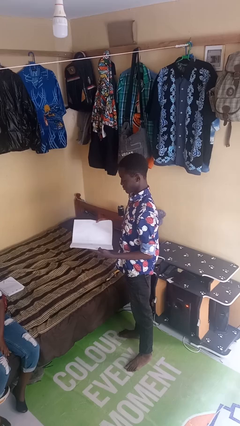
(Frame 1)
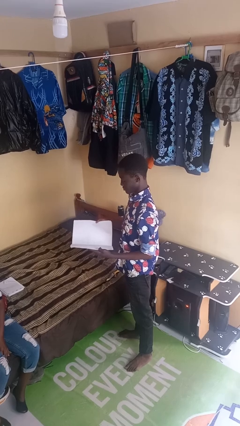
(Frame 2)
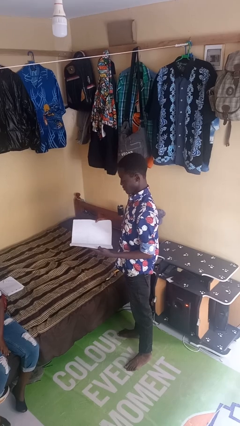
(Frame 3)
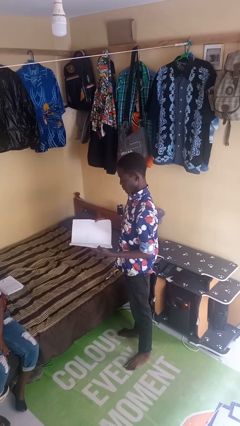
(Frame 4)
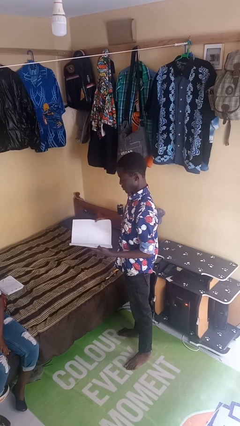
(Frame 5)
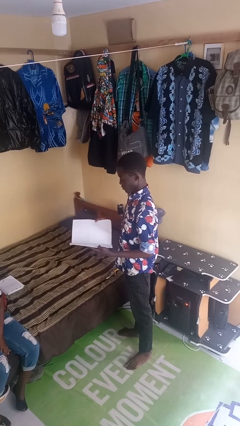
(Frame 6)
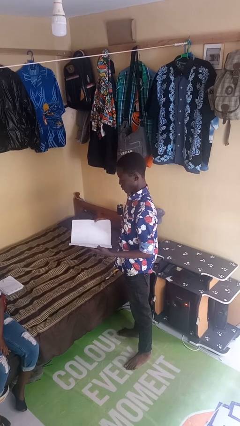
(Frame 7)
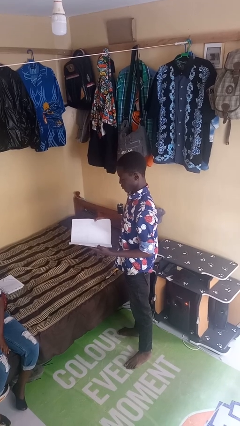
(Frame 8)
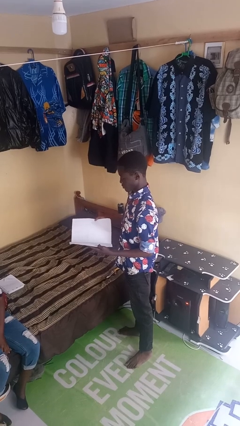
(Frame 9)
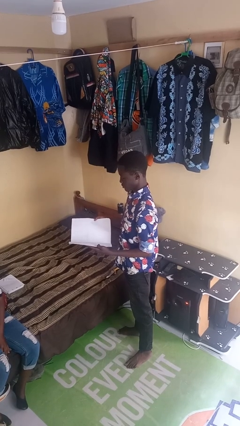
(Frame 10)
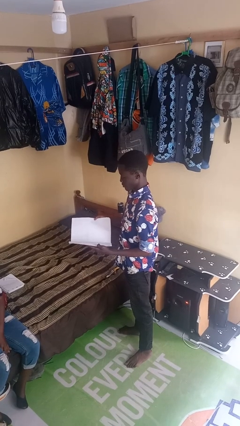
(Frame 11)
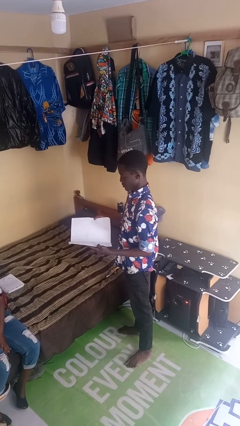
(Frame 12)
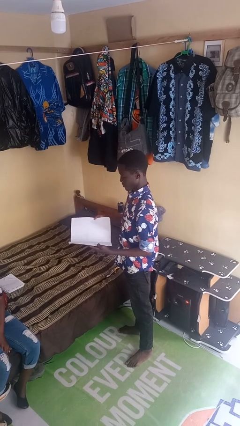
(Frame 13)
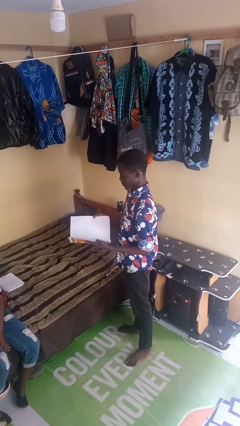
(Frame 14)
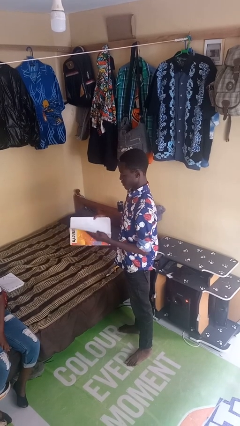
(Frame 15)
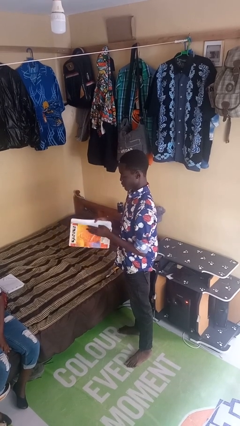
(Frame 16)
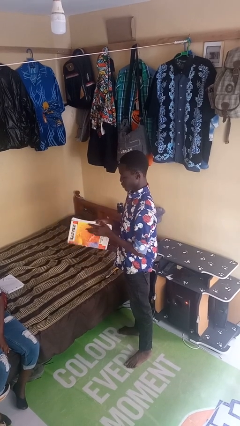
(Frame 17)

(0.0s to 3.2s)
person reads newspaper

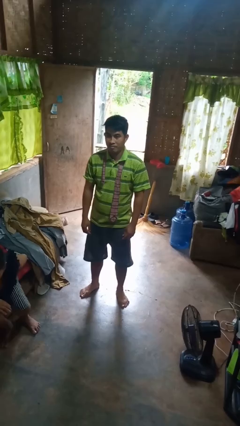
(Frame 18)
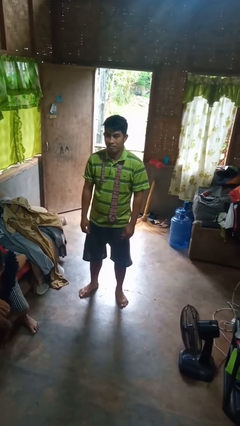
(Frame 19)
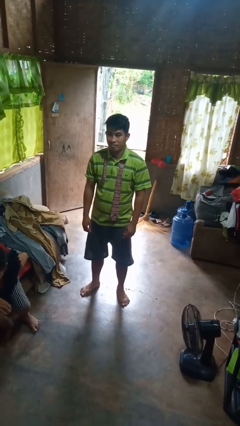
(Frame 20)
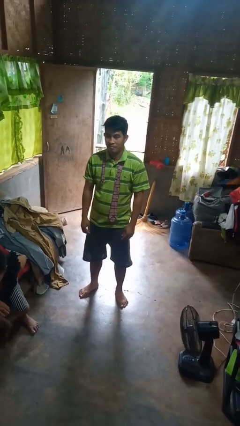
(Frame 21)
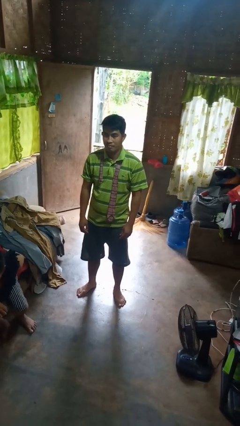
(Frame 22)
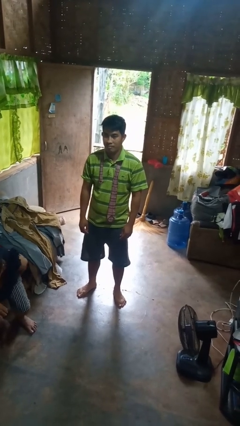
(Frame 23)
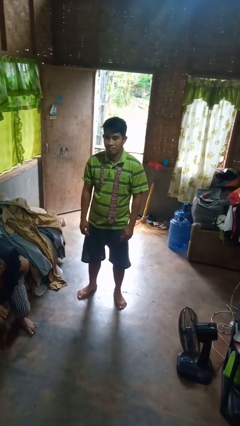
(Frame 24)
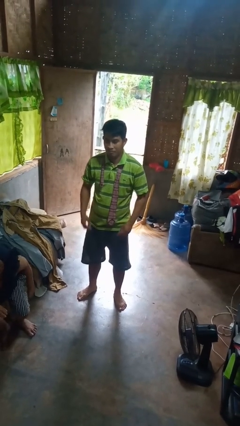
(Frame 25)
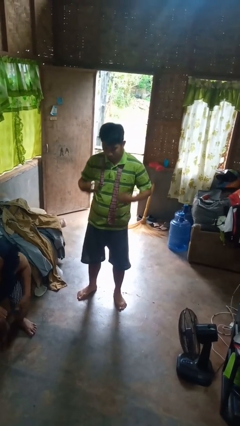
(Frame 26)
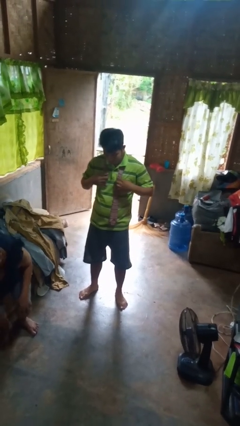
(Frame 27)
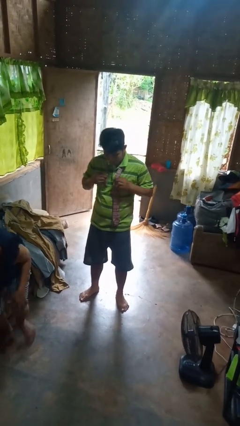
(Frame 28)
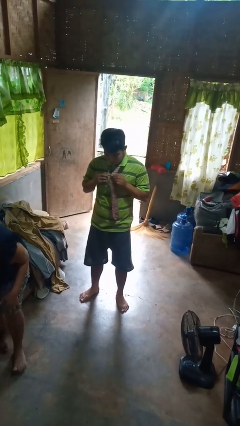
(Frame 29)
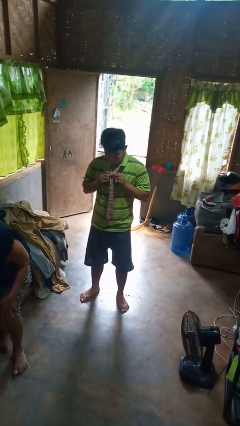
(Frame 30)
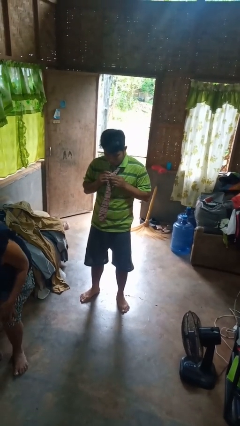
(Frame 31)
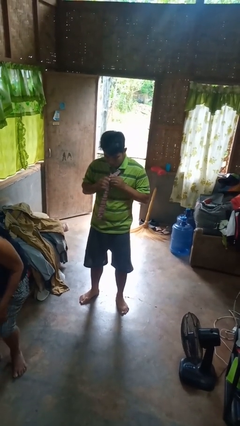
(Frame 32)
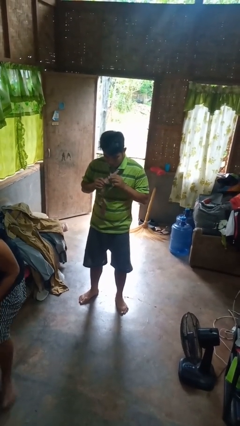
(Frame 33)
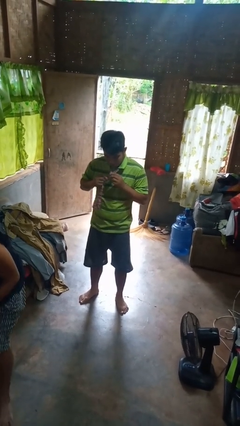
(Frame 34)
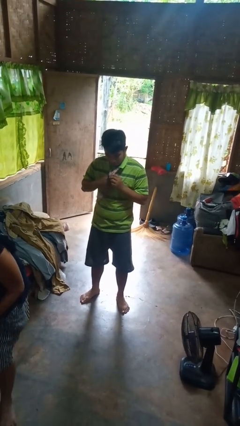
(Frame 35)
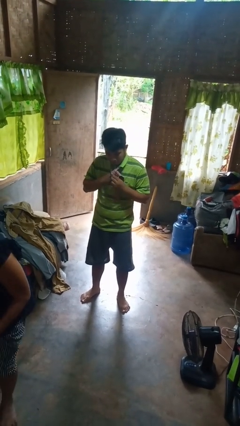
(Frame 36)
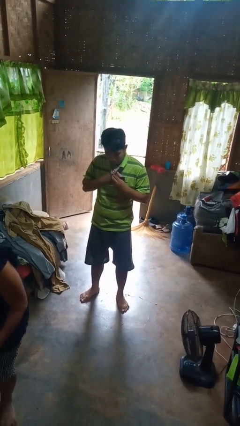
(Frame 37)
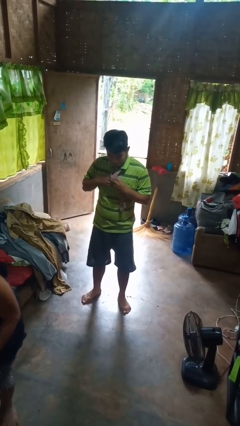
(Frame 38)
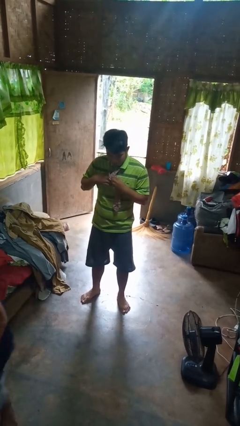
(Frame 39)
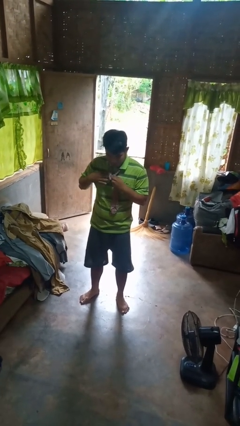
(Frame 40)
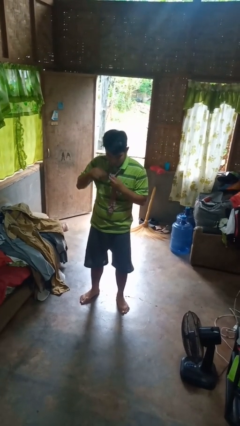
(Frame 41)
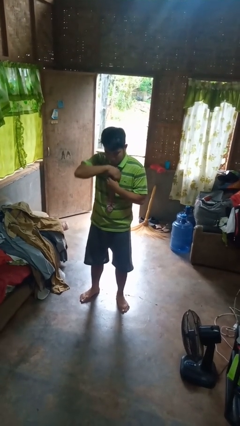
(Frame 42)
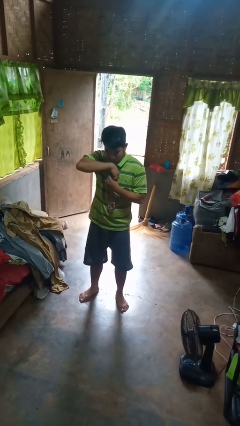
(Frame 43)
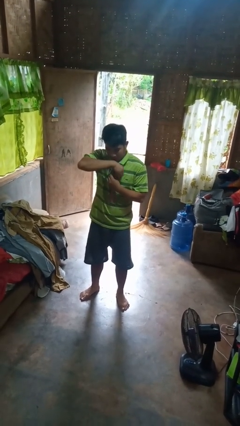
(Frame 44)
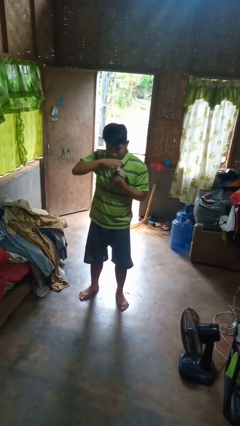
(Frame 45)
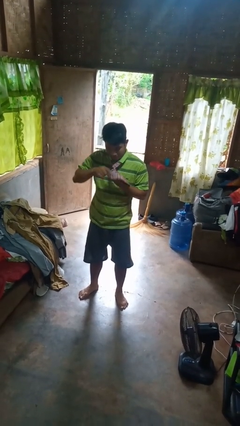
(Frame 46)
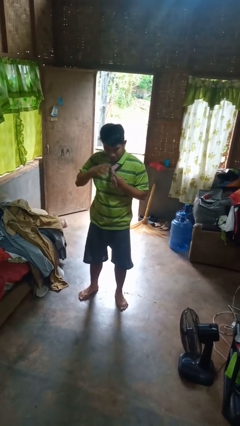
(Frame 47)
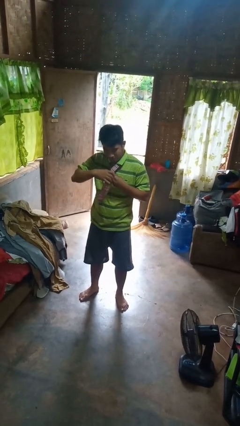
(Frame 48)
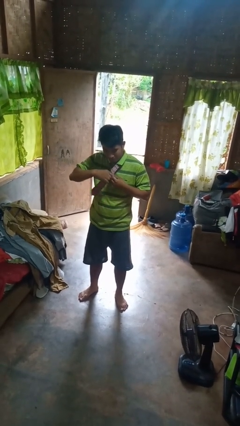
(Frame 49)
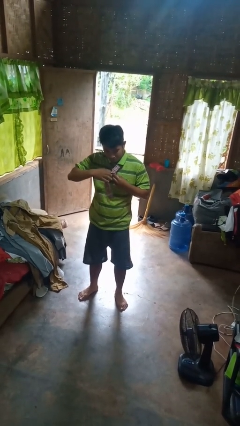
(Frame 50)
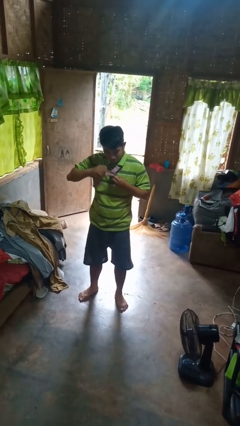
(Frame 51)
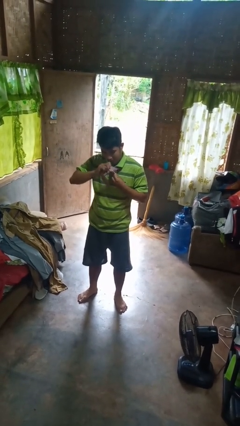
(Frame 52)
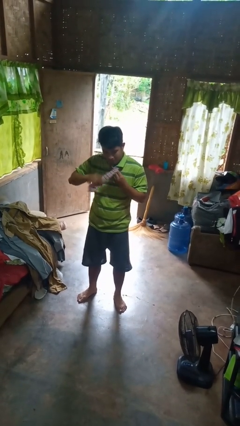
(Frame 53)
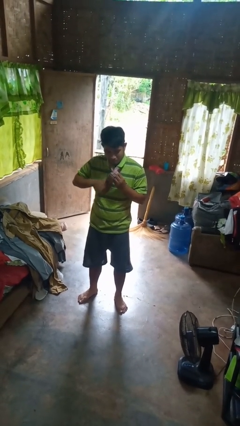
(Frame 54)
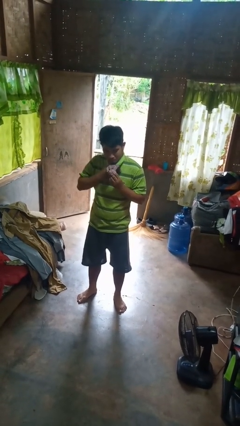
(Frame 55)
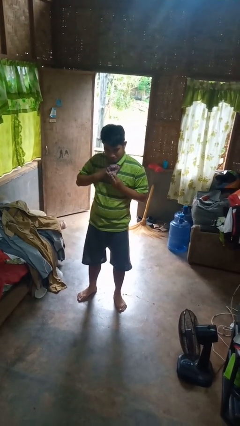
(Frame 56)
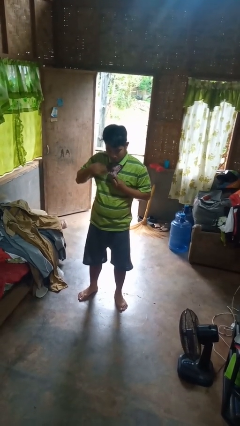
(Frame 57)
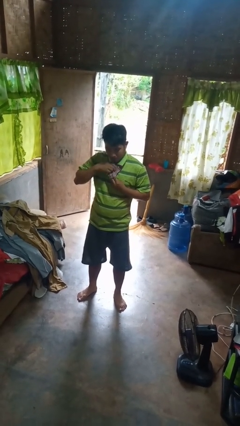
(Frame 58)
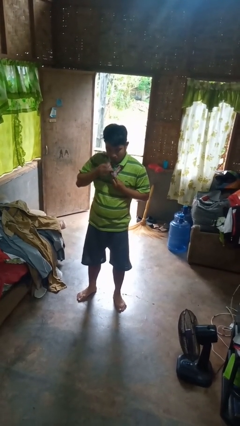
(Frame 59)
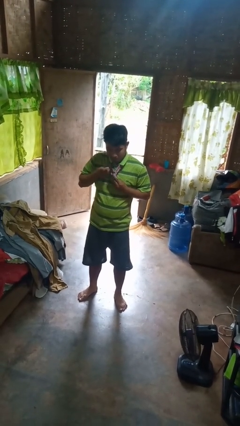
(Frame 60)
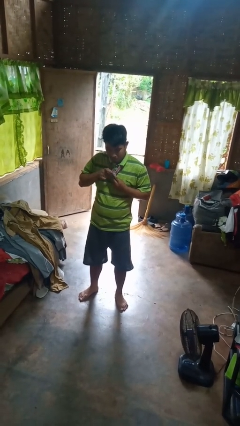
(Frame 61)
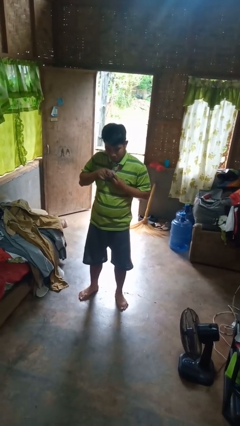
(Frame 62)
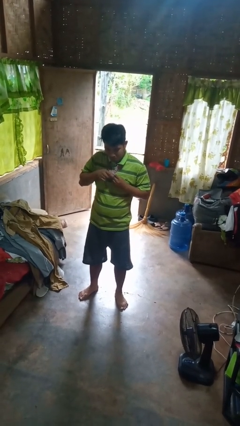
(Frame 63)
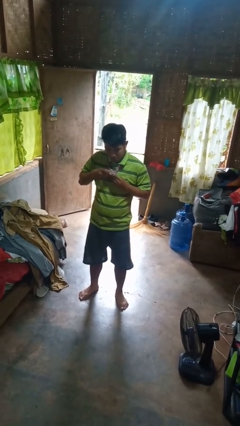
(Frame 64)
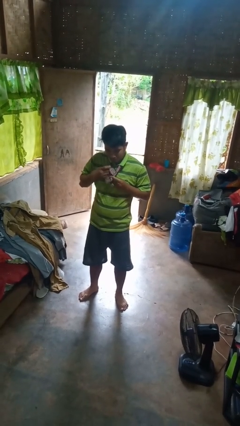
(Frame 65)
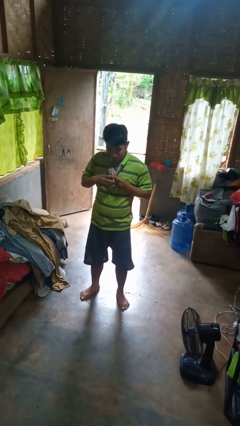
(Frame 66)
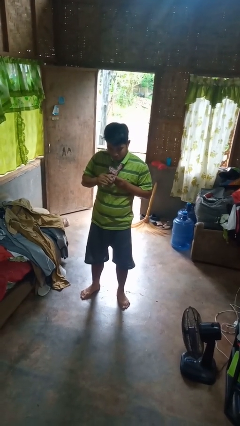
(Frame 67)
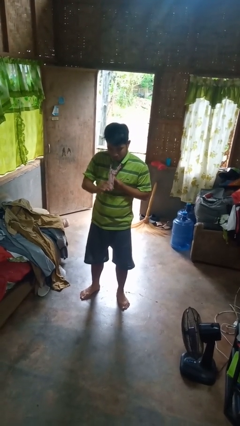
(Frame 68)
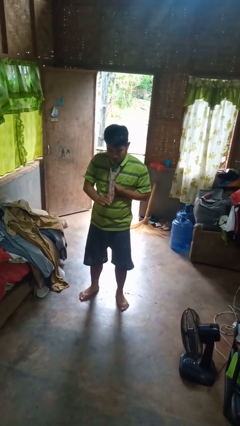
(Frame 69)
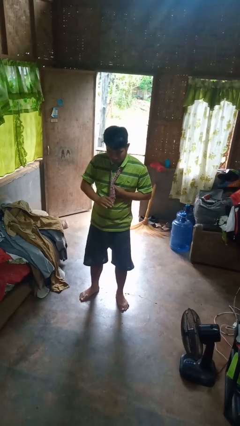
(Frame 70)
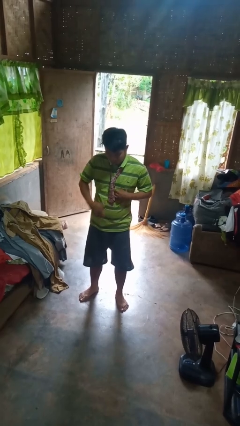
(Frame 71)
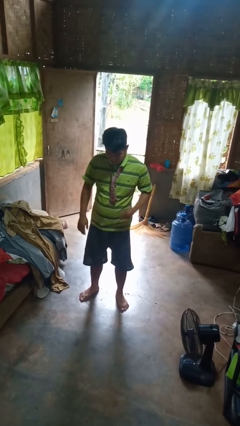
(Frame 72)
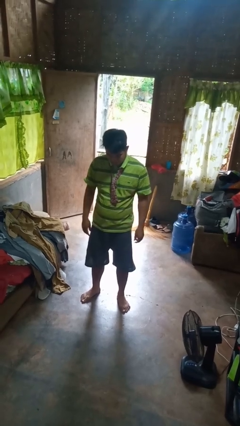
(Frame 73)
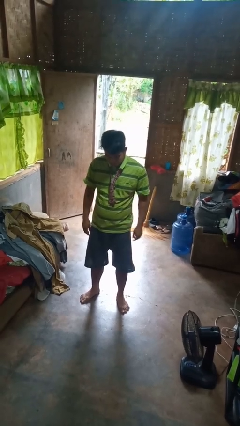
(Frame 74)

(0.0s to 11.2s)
person puts on necktie

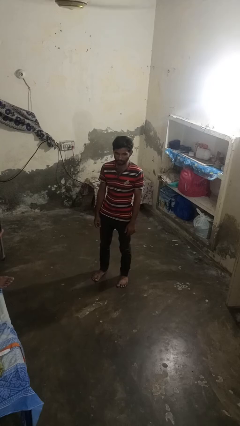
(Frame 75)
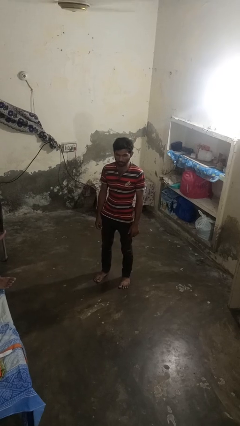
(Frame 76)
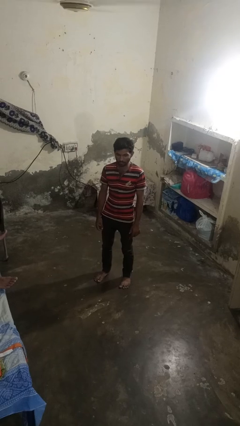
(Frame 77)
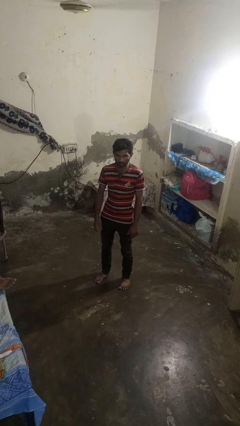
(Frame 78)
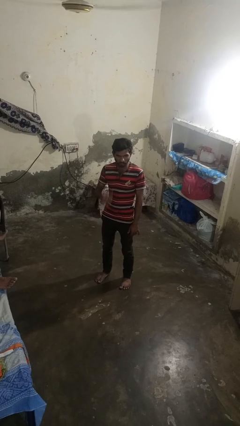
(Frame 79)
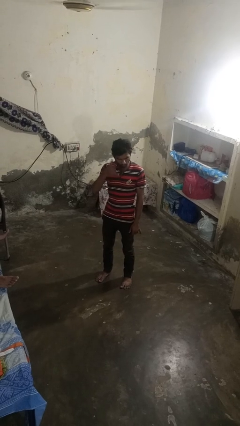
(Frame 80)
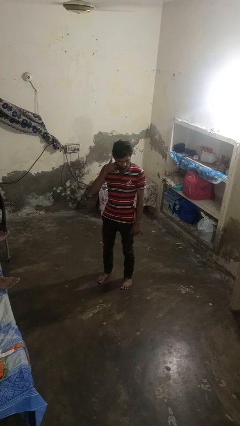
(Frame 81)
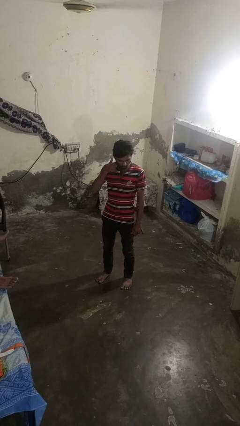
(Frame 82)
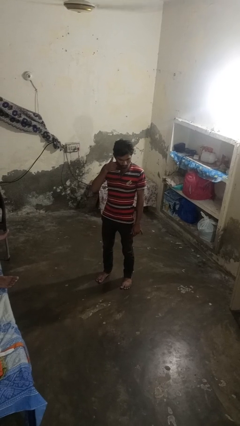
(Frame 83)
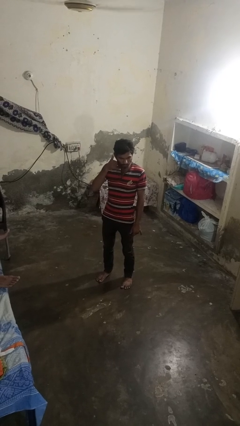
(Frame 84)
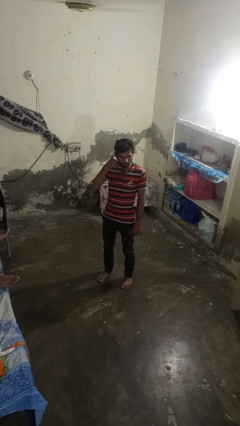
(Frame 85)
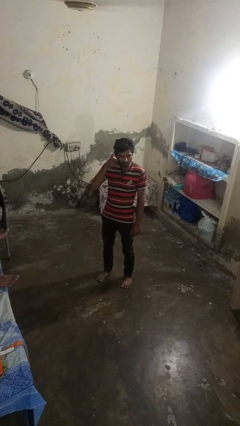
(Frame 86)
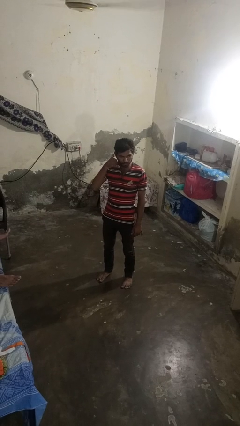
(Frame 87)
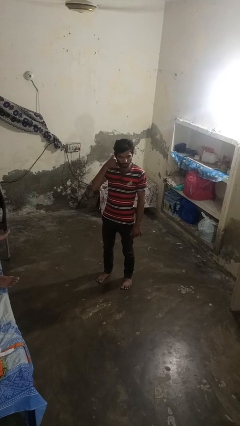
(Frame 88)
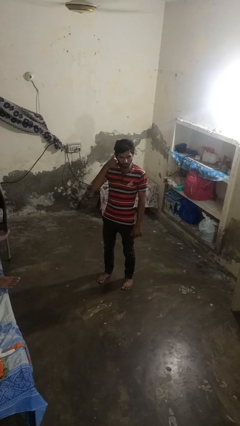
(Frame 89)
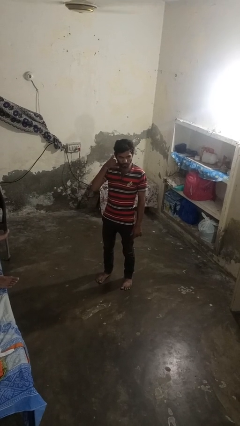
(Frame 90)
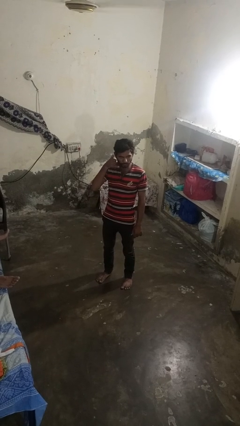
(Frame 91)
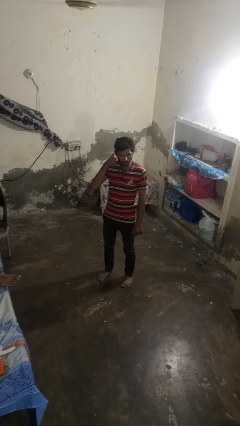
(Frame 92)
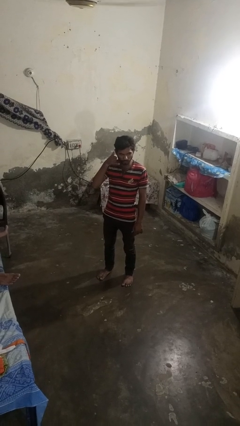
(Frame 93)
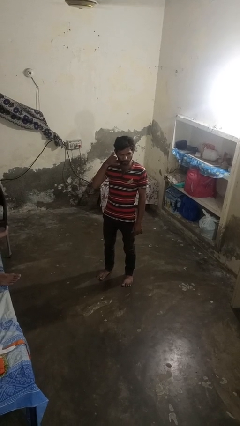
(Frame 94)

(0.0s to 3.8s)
person gestures call me
